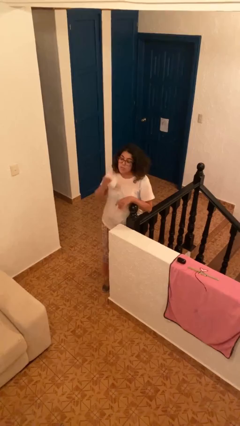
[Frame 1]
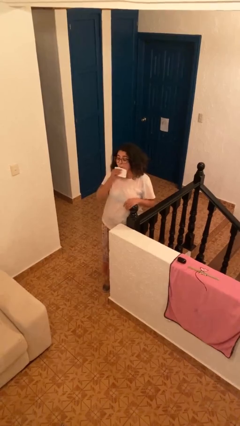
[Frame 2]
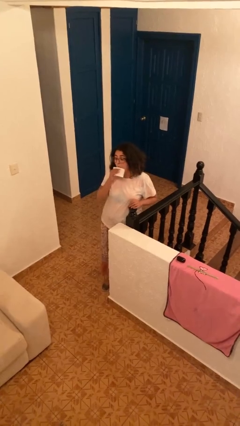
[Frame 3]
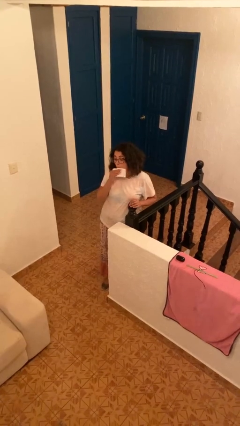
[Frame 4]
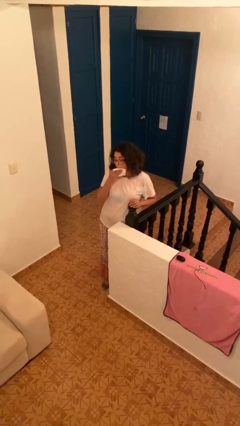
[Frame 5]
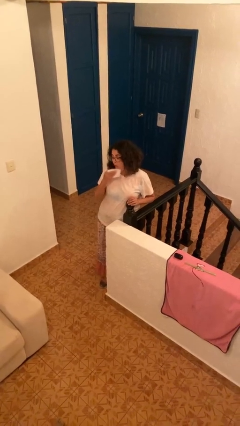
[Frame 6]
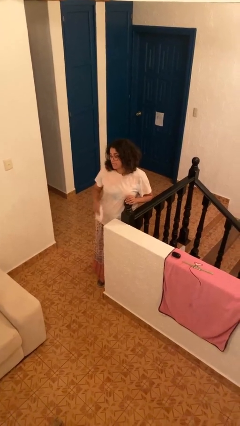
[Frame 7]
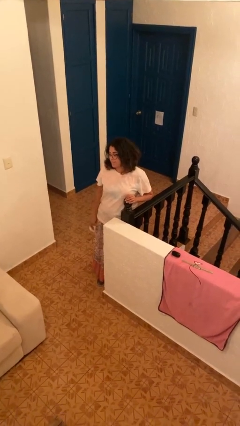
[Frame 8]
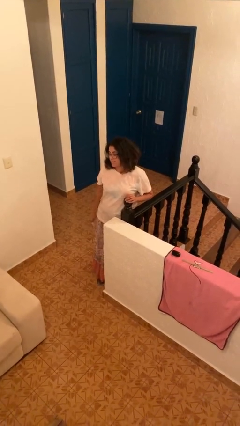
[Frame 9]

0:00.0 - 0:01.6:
person wipes mouth with napkin

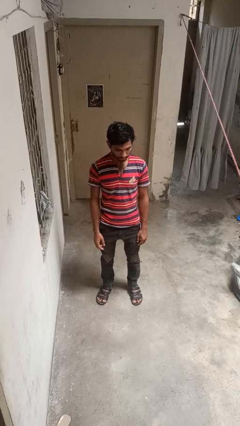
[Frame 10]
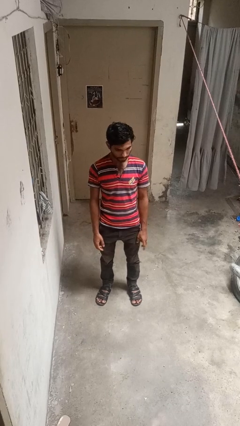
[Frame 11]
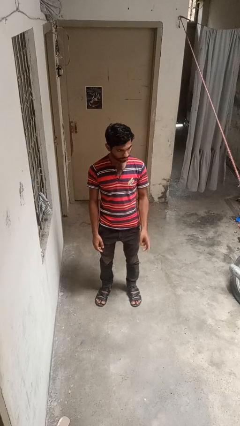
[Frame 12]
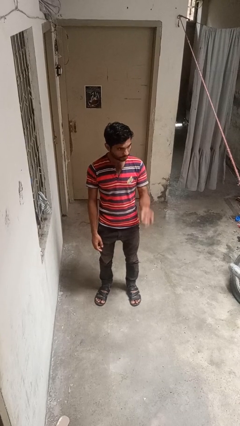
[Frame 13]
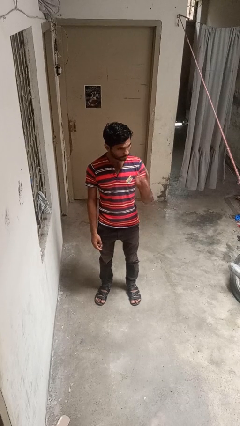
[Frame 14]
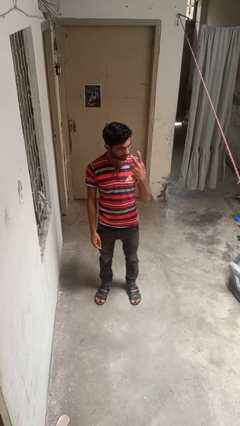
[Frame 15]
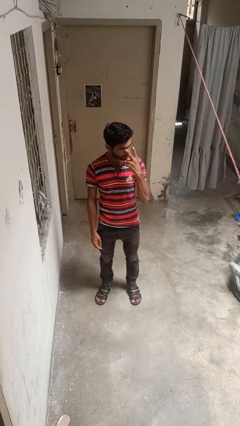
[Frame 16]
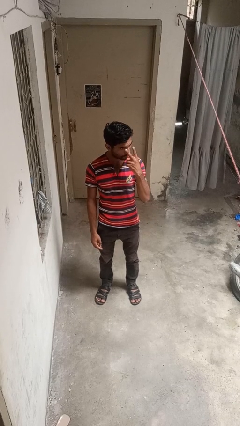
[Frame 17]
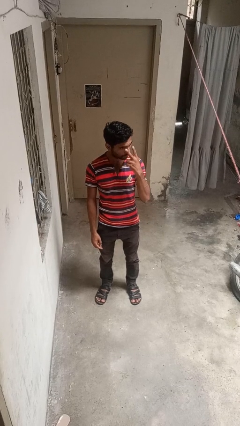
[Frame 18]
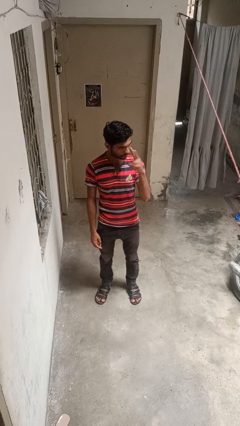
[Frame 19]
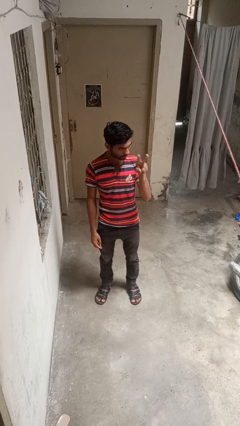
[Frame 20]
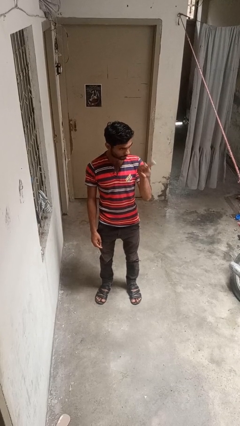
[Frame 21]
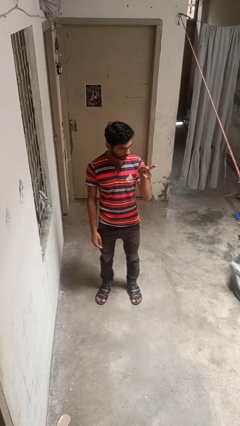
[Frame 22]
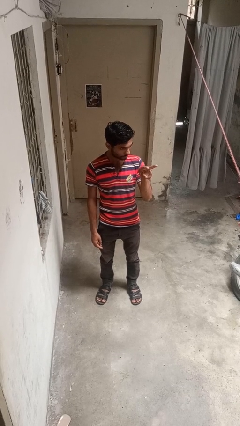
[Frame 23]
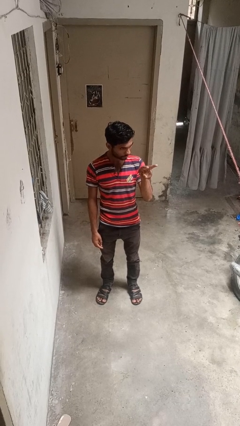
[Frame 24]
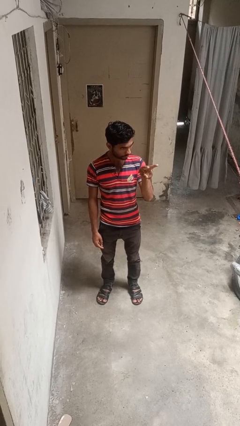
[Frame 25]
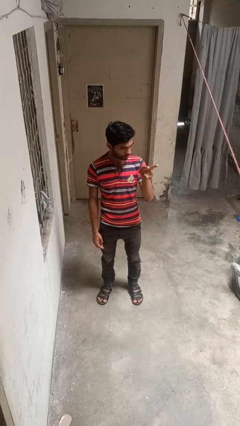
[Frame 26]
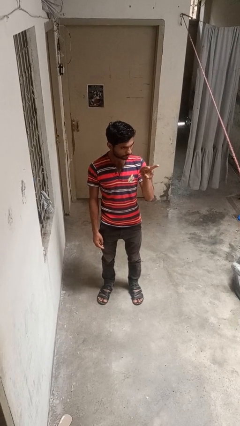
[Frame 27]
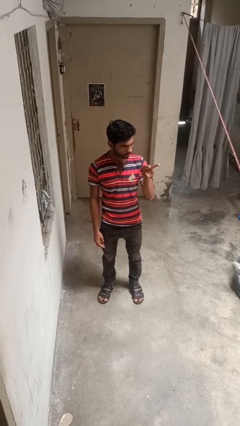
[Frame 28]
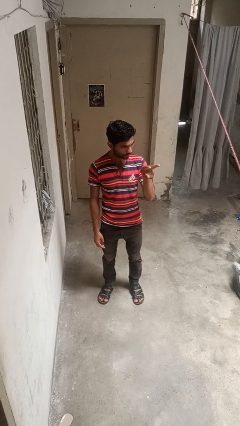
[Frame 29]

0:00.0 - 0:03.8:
person gestures watch closely

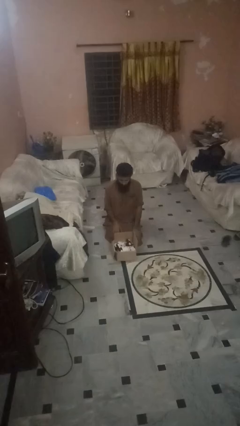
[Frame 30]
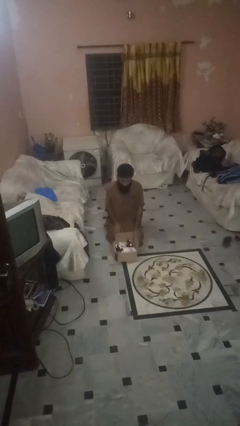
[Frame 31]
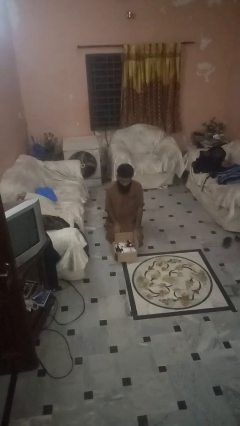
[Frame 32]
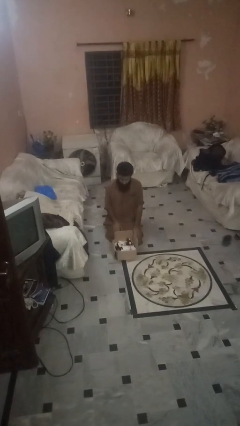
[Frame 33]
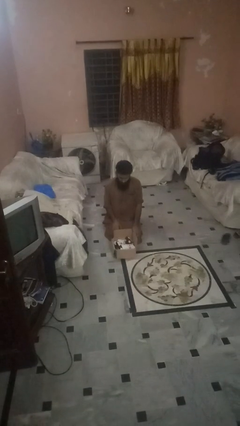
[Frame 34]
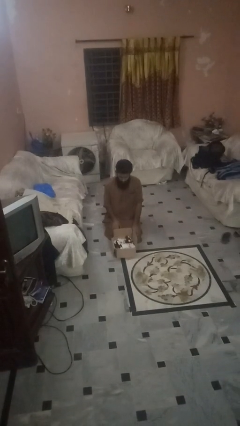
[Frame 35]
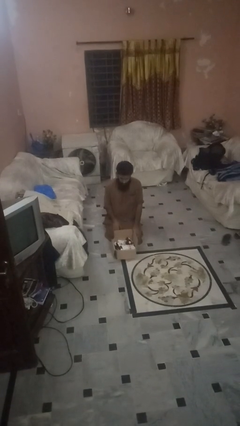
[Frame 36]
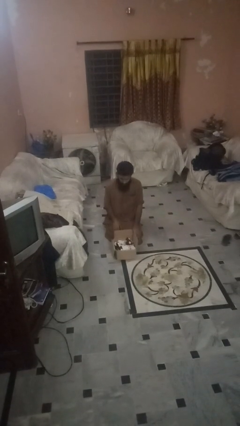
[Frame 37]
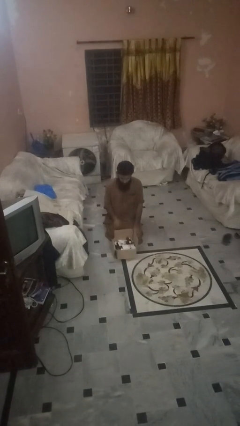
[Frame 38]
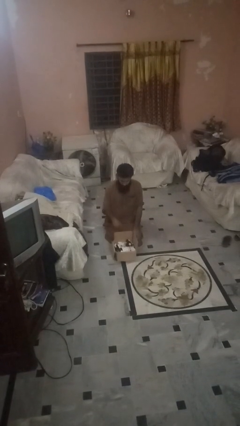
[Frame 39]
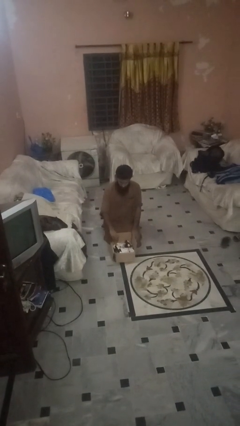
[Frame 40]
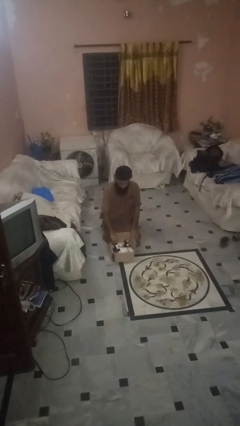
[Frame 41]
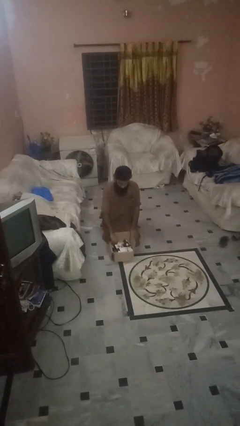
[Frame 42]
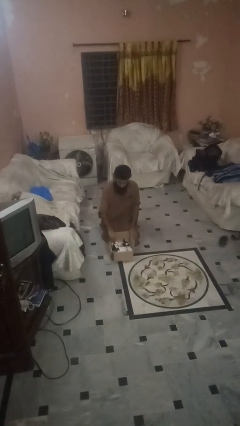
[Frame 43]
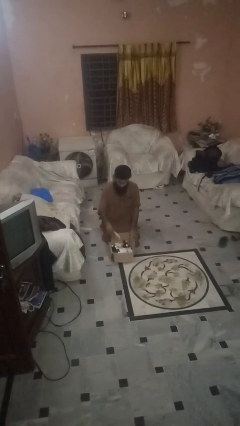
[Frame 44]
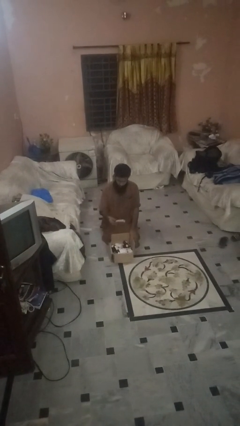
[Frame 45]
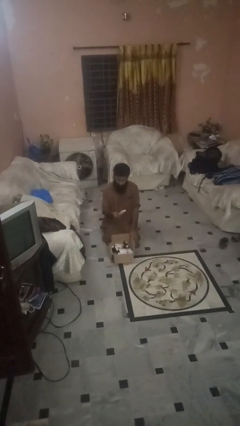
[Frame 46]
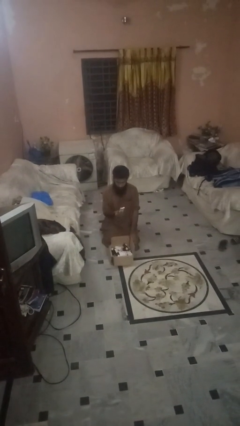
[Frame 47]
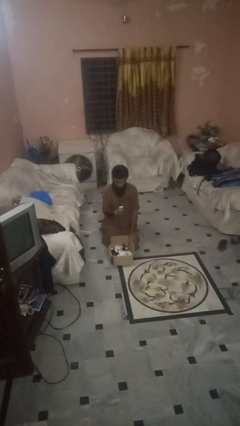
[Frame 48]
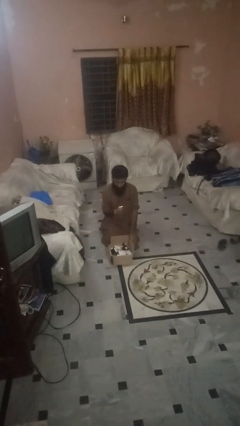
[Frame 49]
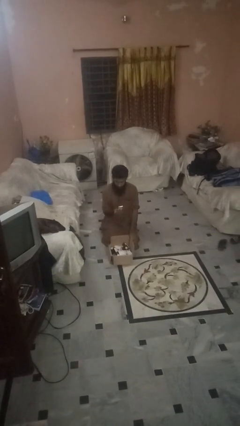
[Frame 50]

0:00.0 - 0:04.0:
person takes object from box

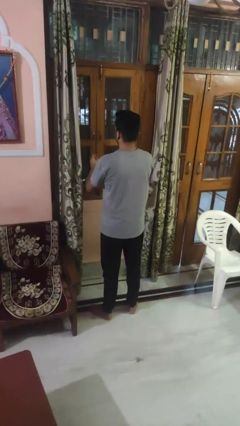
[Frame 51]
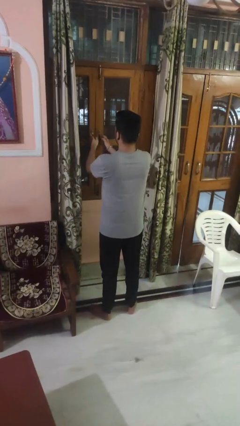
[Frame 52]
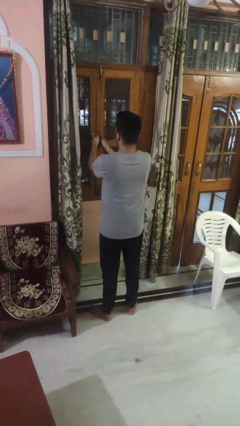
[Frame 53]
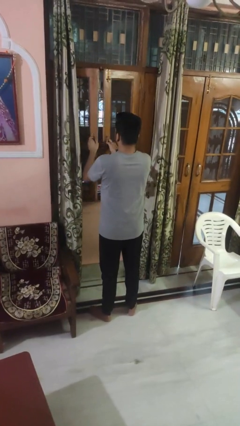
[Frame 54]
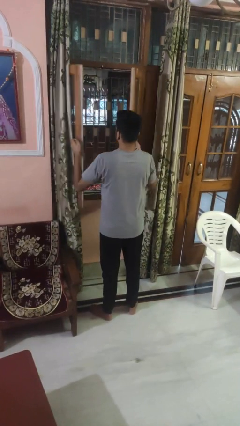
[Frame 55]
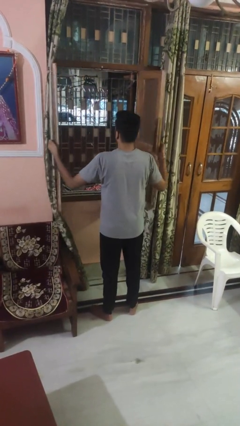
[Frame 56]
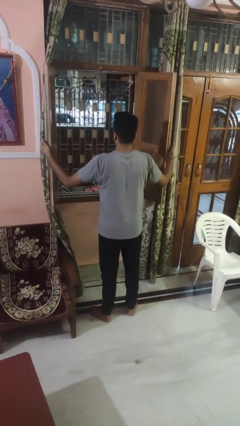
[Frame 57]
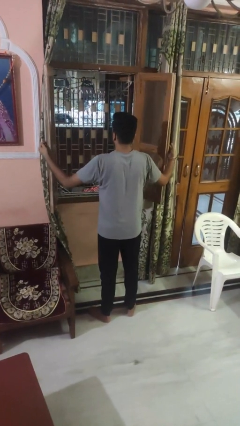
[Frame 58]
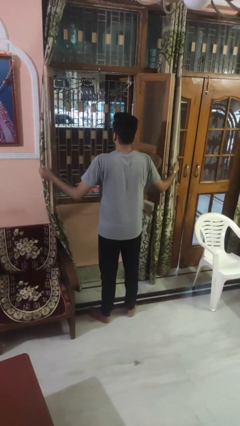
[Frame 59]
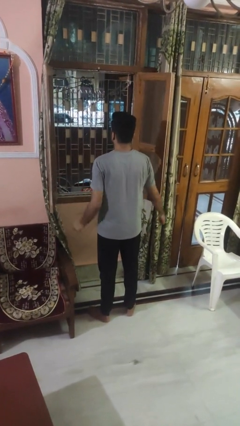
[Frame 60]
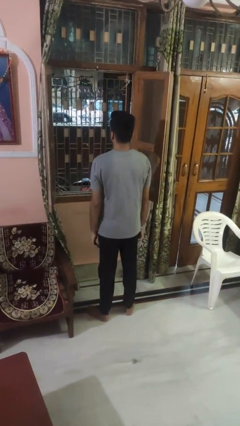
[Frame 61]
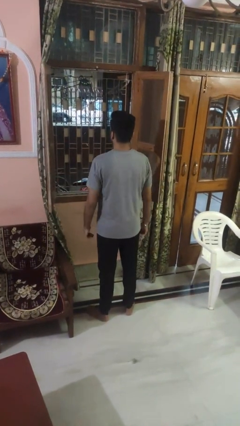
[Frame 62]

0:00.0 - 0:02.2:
person opens home window

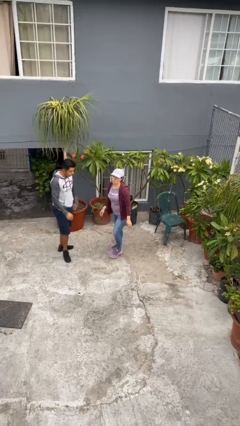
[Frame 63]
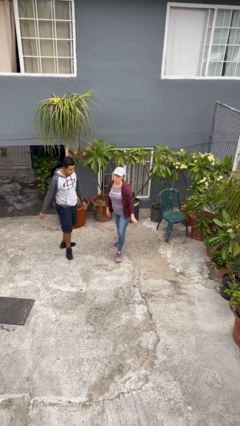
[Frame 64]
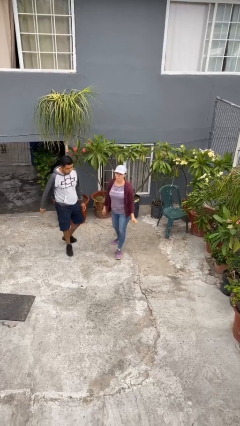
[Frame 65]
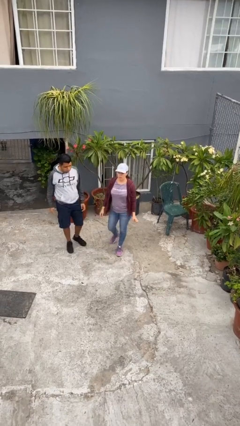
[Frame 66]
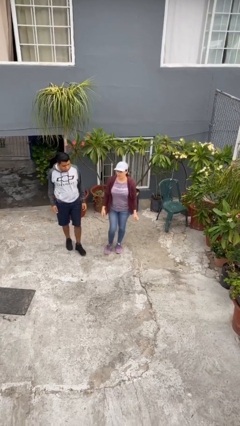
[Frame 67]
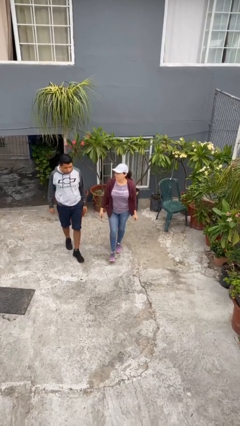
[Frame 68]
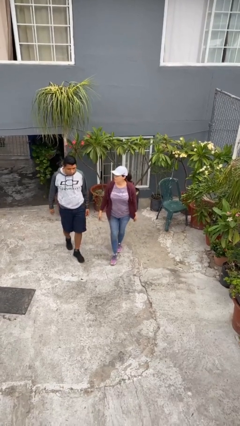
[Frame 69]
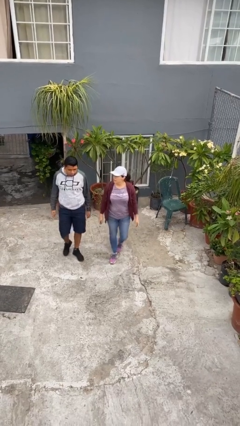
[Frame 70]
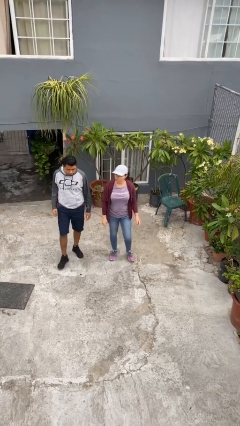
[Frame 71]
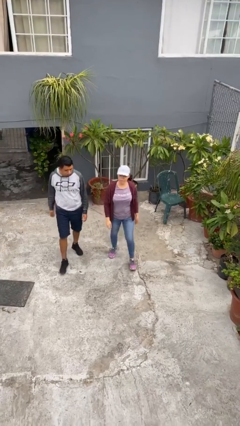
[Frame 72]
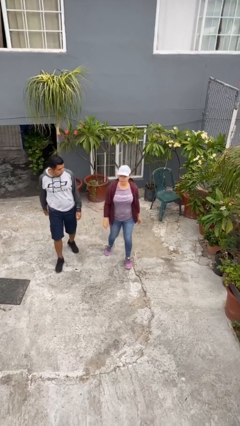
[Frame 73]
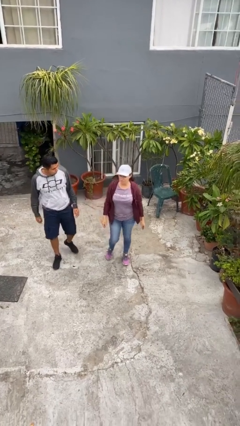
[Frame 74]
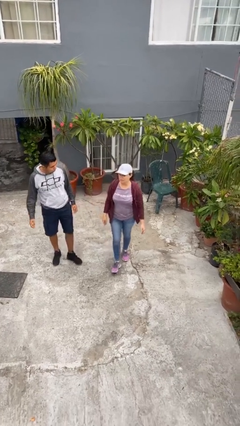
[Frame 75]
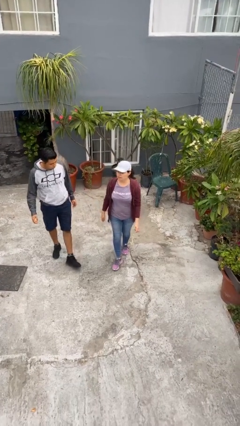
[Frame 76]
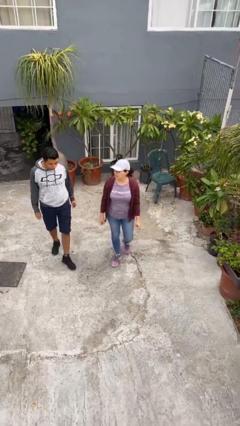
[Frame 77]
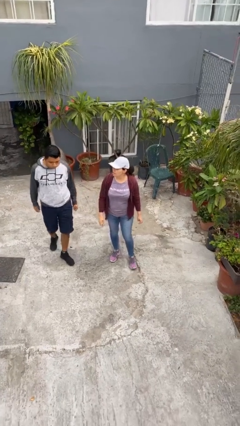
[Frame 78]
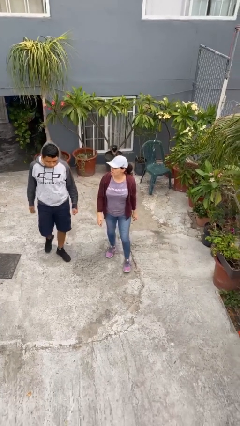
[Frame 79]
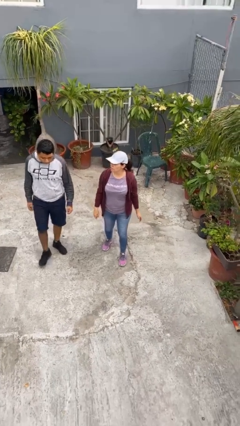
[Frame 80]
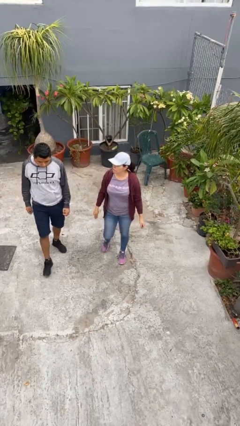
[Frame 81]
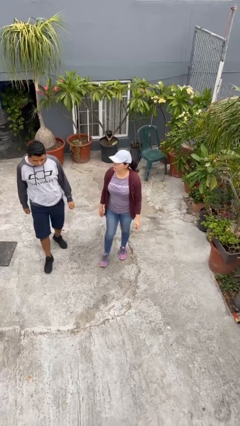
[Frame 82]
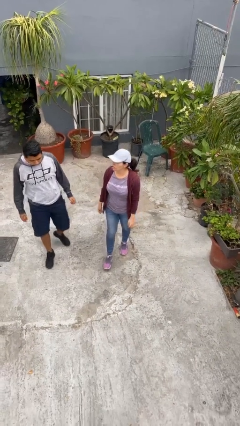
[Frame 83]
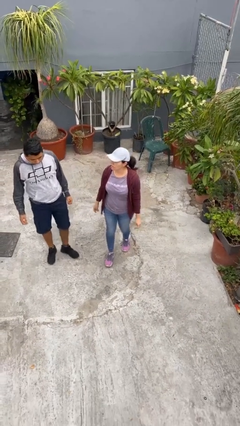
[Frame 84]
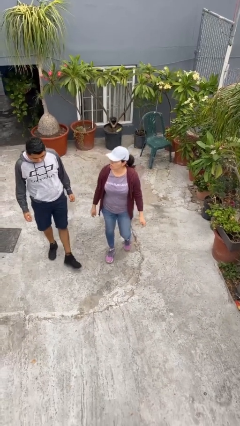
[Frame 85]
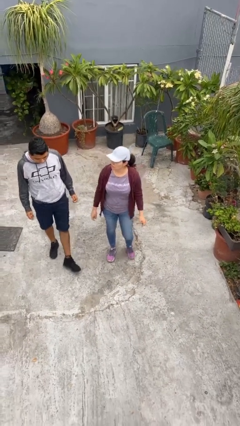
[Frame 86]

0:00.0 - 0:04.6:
person talks to person

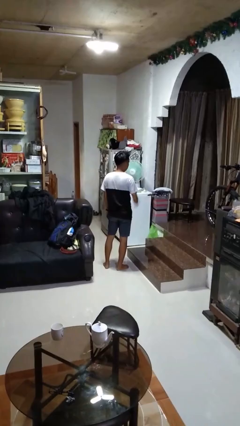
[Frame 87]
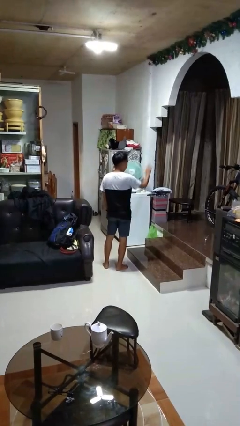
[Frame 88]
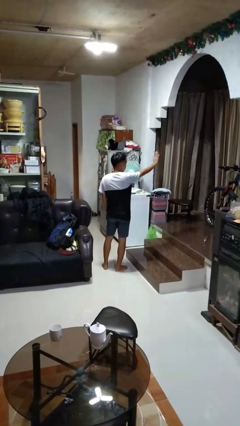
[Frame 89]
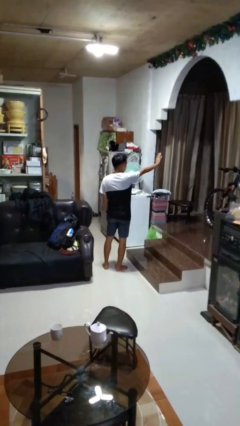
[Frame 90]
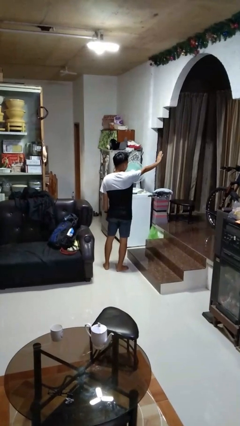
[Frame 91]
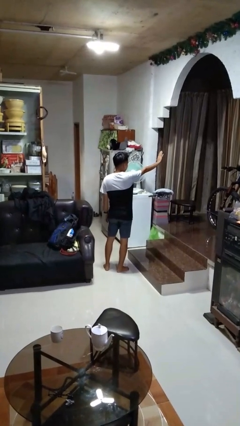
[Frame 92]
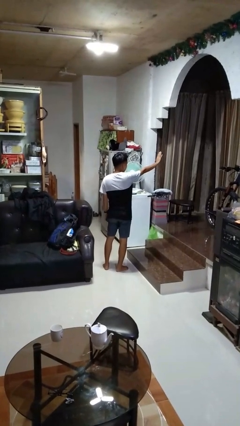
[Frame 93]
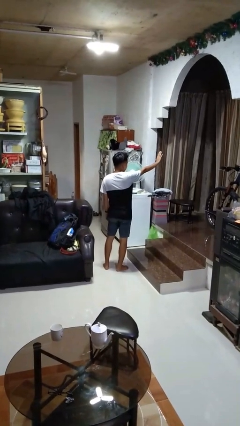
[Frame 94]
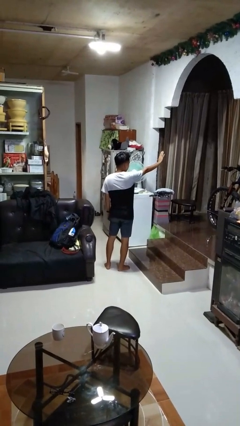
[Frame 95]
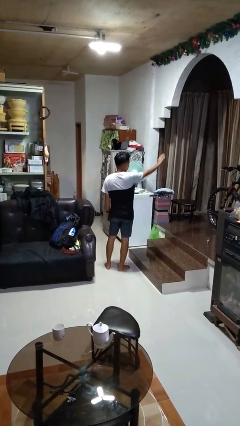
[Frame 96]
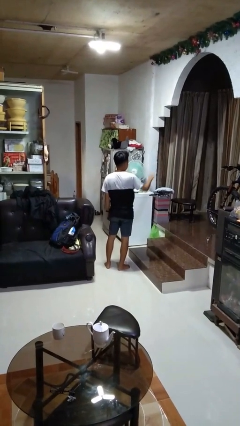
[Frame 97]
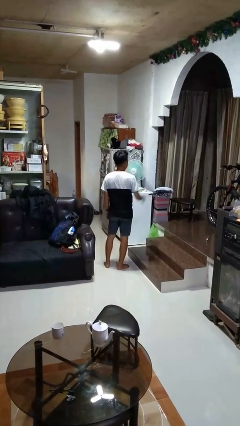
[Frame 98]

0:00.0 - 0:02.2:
person gestures stop
